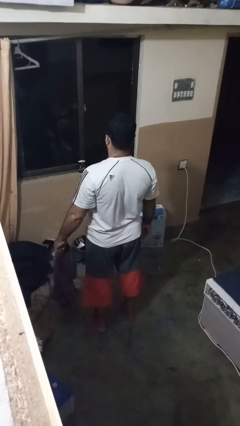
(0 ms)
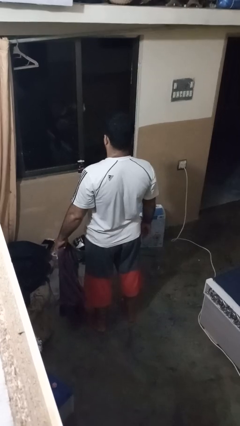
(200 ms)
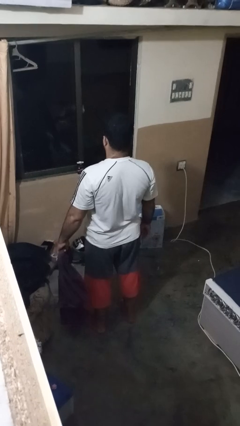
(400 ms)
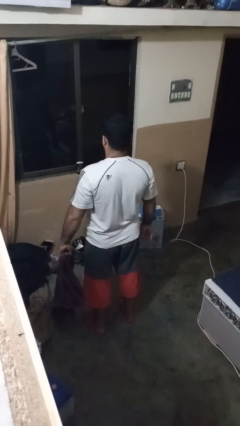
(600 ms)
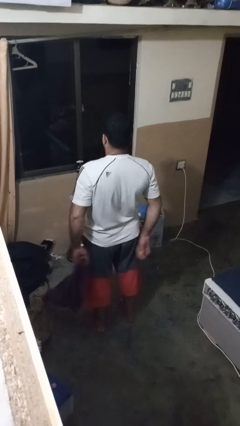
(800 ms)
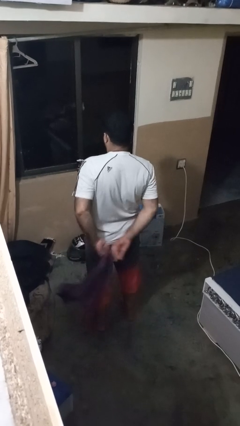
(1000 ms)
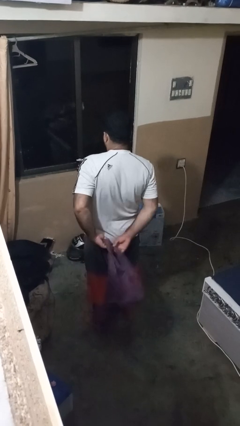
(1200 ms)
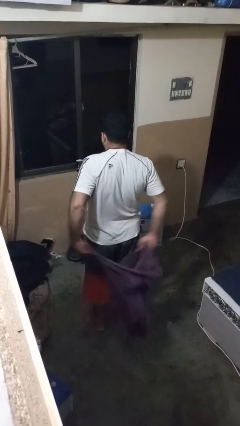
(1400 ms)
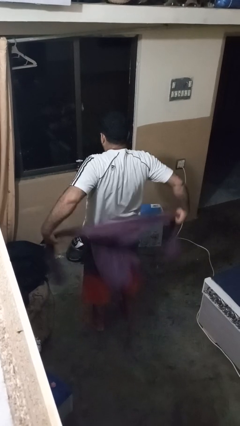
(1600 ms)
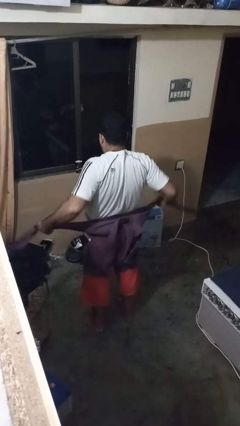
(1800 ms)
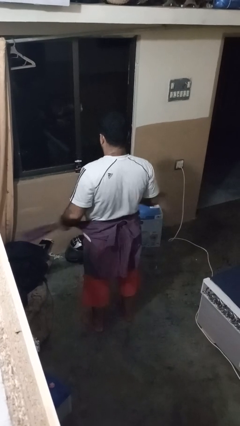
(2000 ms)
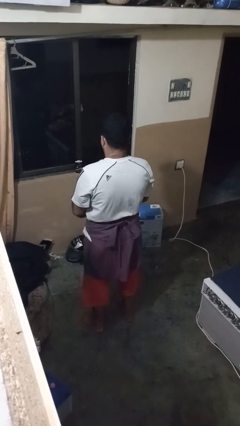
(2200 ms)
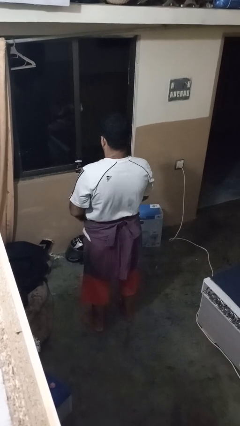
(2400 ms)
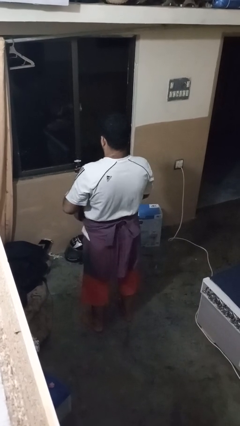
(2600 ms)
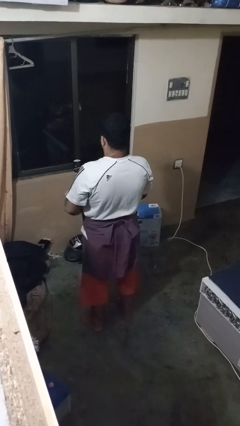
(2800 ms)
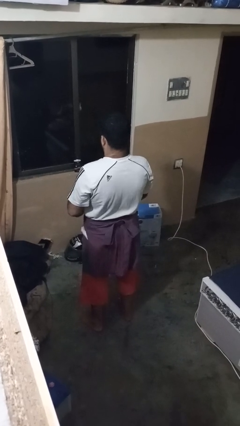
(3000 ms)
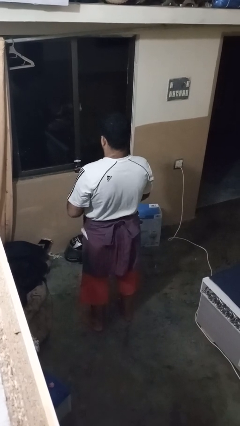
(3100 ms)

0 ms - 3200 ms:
person ties jacket around waist

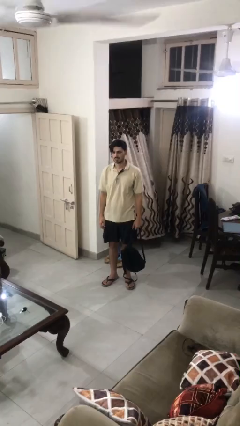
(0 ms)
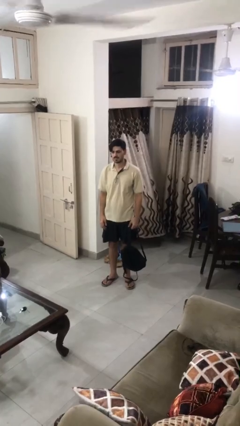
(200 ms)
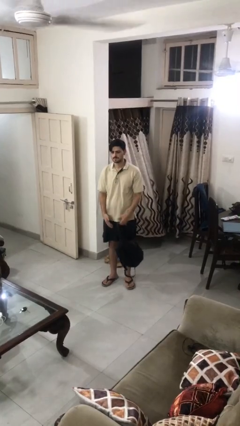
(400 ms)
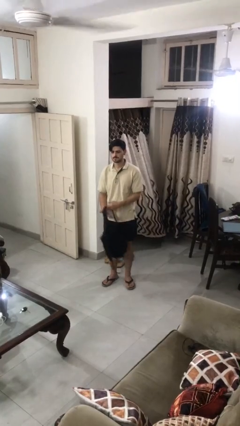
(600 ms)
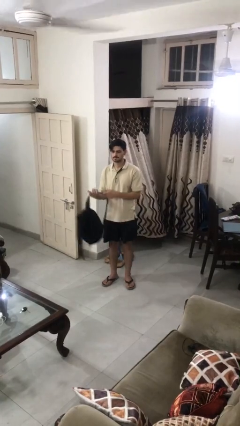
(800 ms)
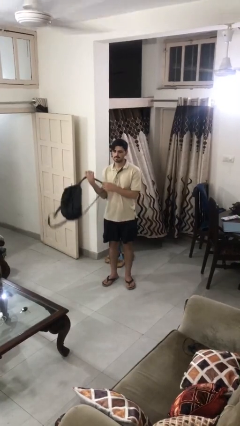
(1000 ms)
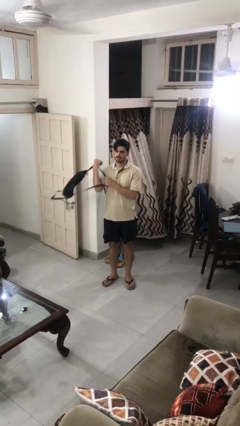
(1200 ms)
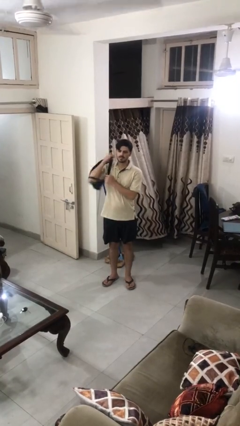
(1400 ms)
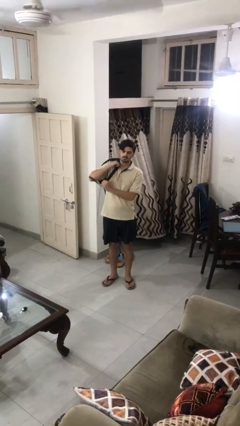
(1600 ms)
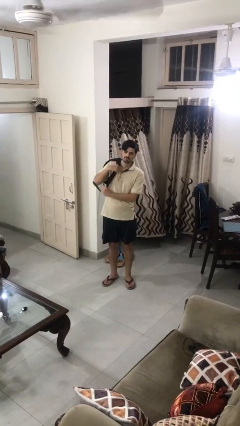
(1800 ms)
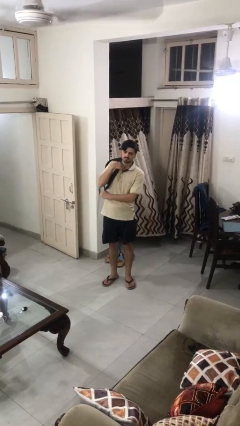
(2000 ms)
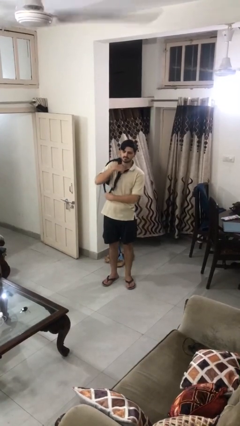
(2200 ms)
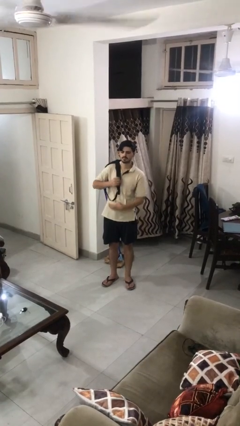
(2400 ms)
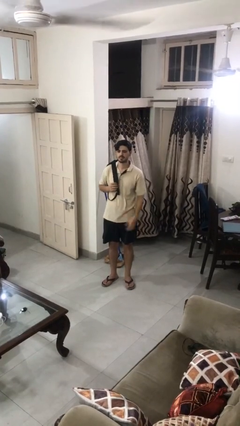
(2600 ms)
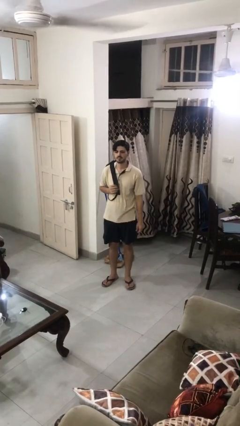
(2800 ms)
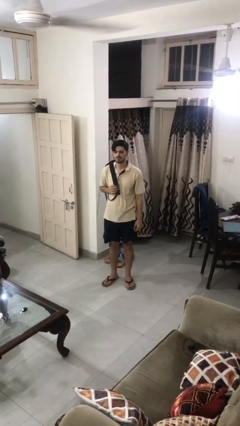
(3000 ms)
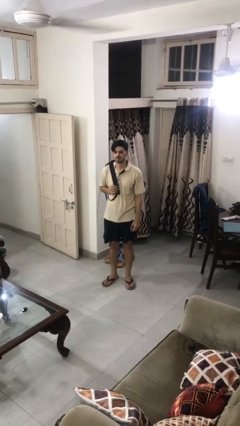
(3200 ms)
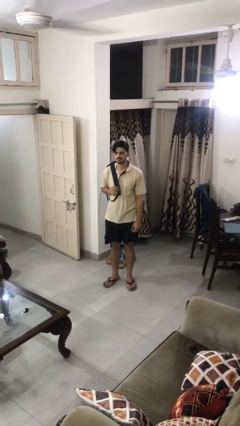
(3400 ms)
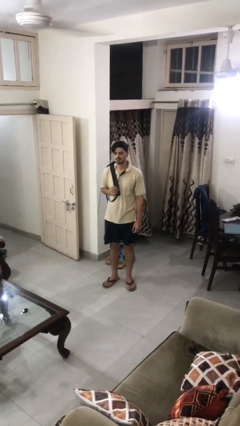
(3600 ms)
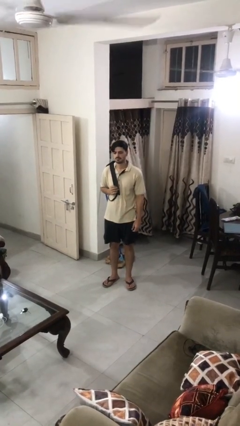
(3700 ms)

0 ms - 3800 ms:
person puts on backpack

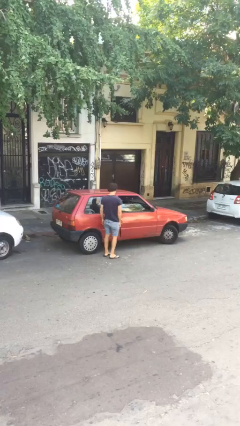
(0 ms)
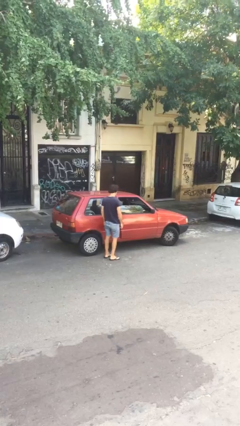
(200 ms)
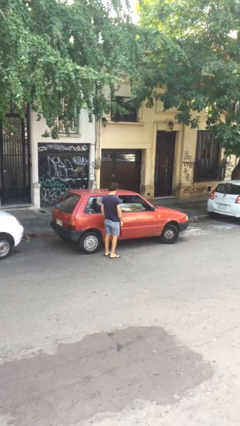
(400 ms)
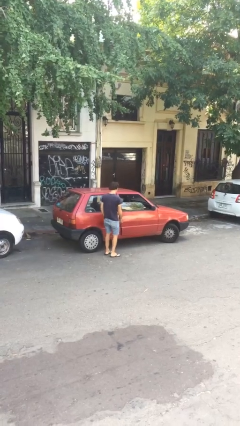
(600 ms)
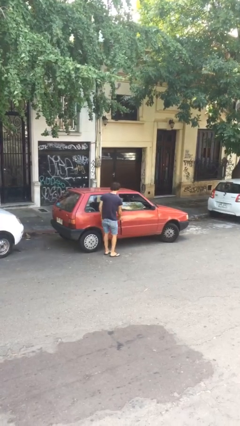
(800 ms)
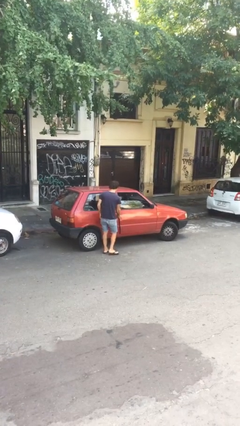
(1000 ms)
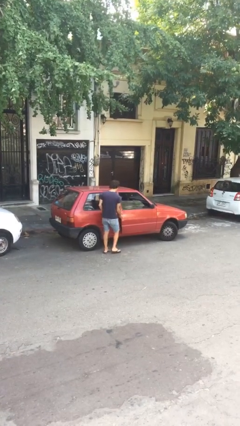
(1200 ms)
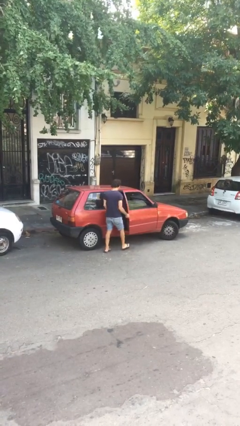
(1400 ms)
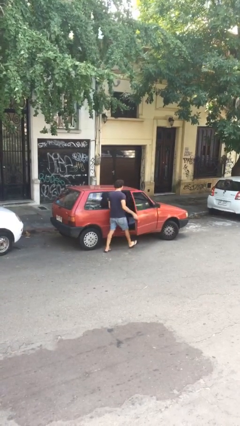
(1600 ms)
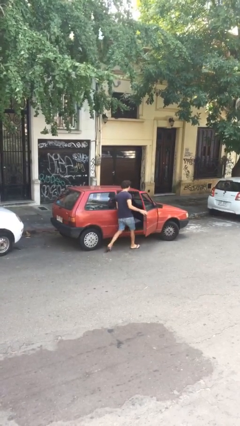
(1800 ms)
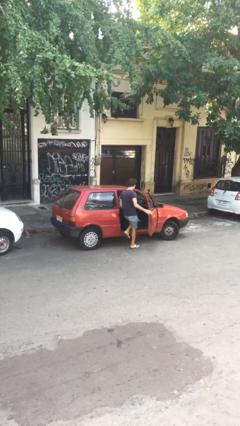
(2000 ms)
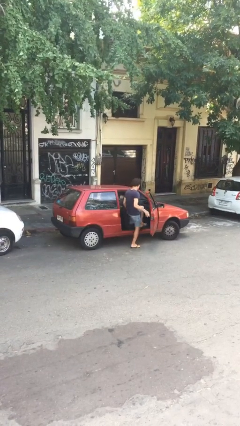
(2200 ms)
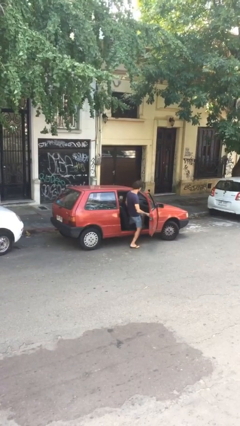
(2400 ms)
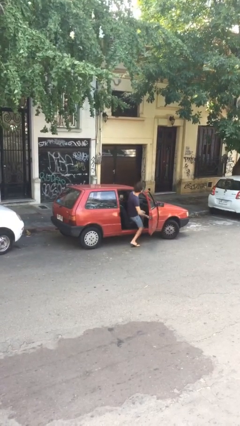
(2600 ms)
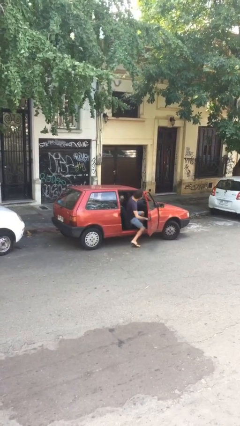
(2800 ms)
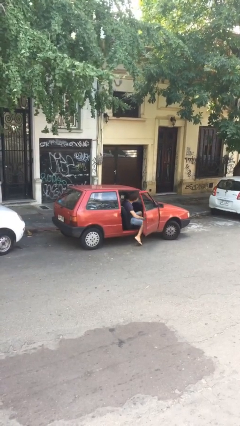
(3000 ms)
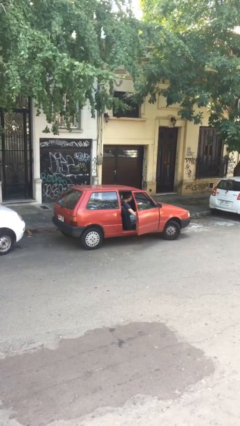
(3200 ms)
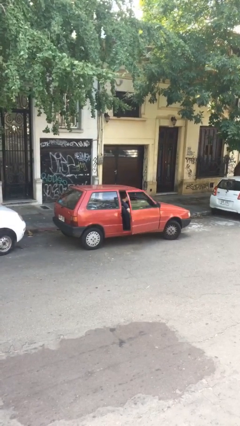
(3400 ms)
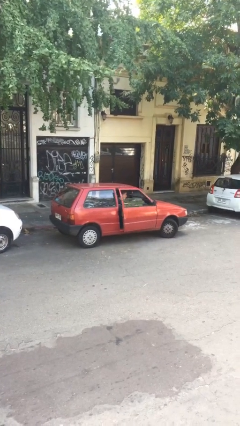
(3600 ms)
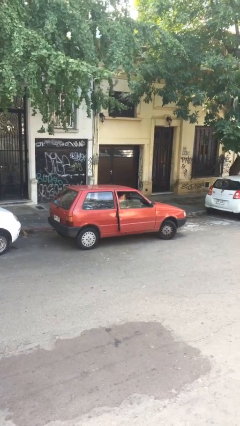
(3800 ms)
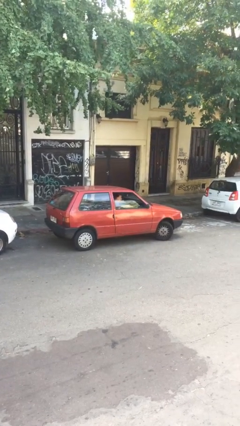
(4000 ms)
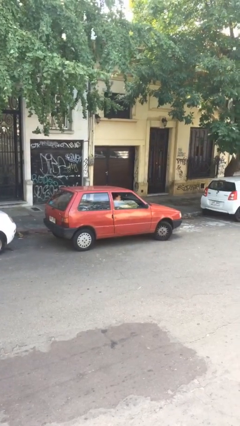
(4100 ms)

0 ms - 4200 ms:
car picks up person

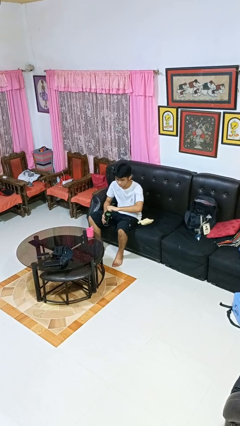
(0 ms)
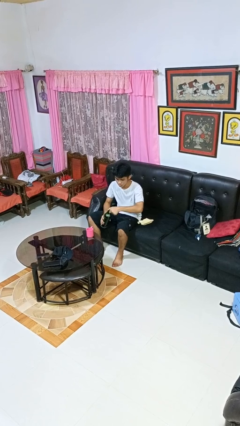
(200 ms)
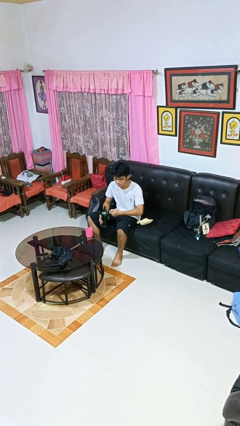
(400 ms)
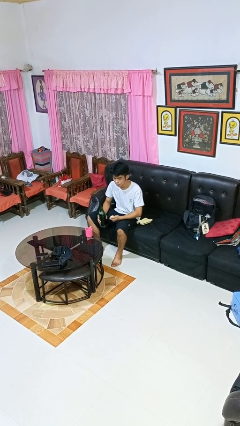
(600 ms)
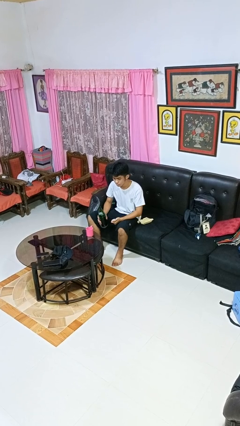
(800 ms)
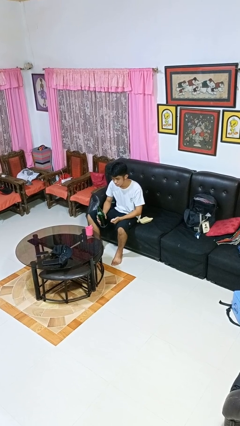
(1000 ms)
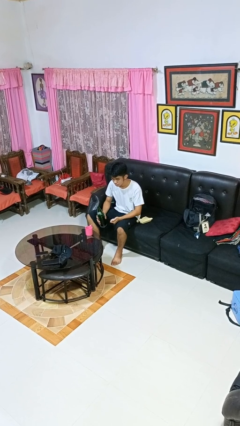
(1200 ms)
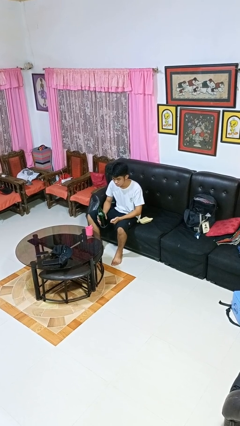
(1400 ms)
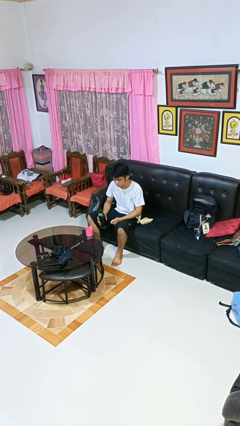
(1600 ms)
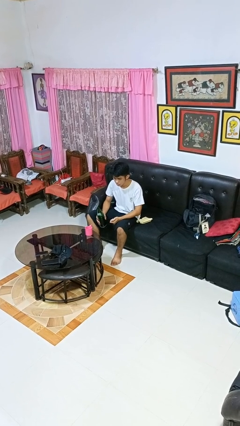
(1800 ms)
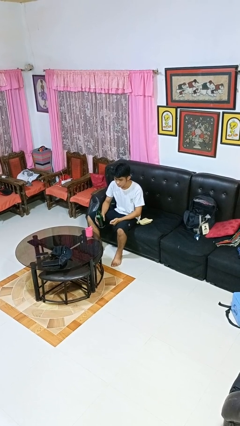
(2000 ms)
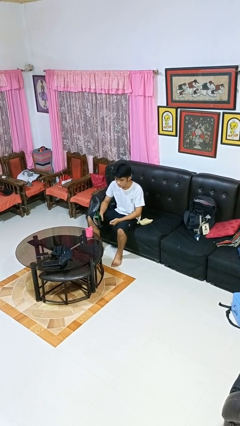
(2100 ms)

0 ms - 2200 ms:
person unscrews lid from bottle

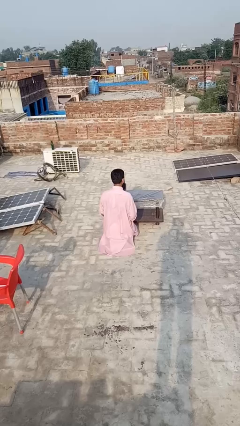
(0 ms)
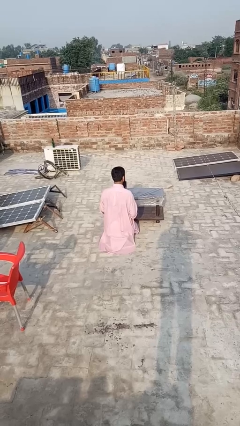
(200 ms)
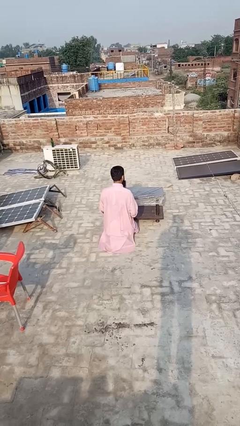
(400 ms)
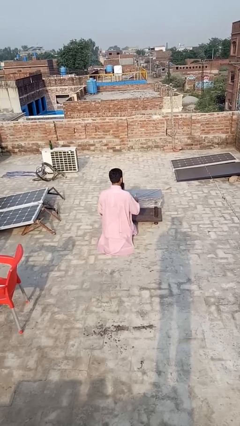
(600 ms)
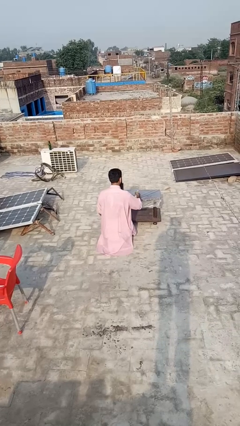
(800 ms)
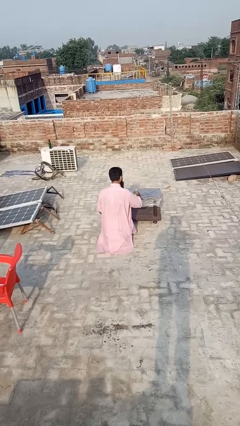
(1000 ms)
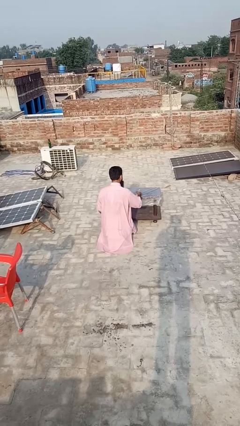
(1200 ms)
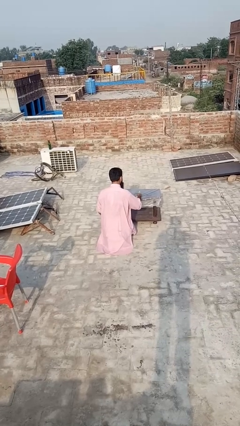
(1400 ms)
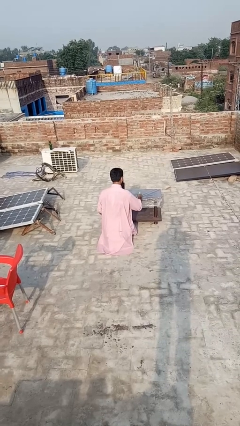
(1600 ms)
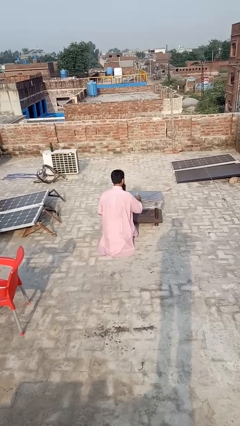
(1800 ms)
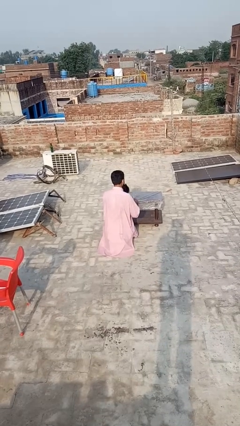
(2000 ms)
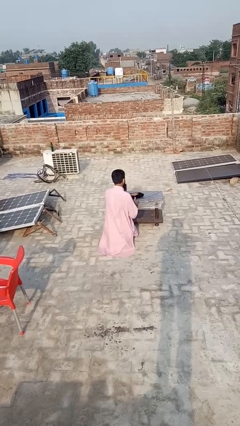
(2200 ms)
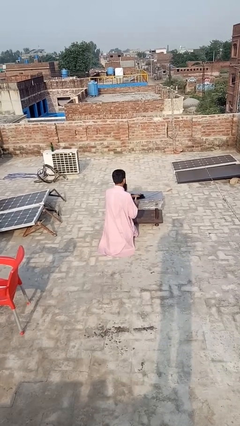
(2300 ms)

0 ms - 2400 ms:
person sprays from bottle

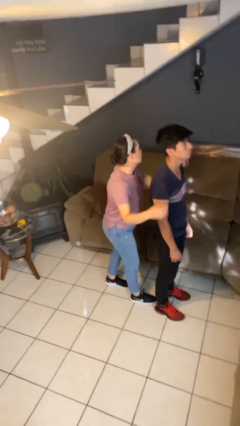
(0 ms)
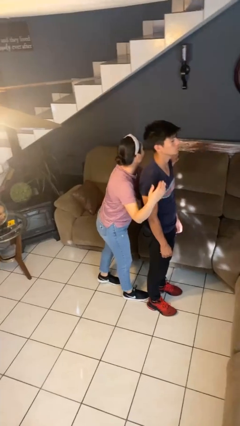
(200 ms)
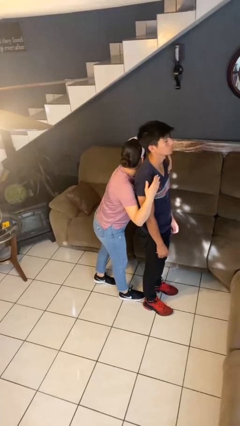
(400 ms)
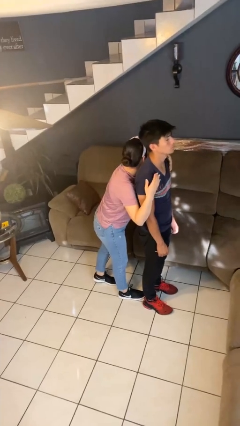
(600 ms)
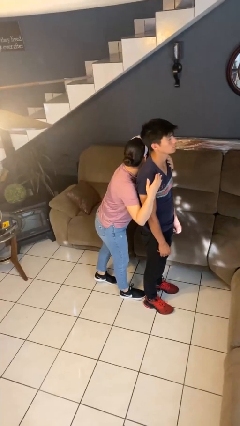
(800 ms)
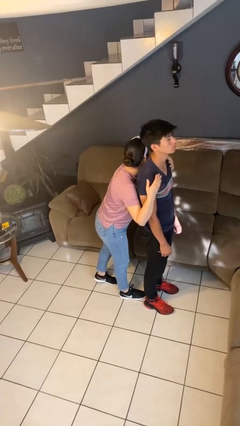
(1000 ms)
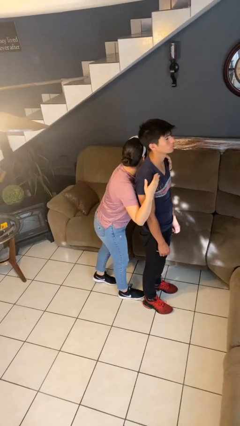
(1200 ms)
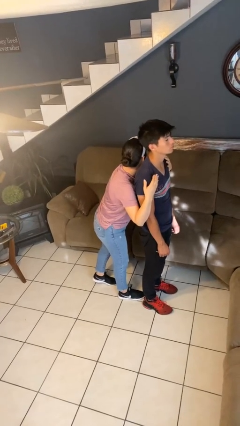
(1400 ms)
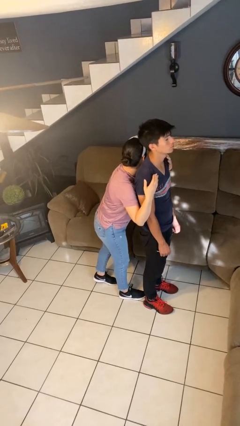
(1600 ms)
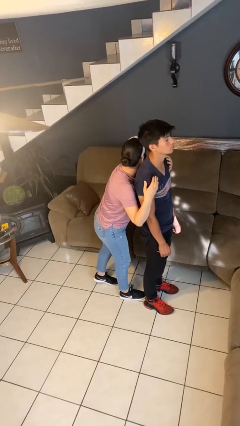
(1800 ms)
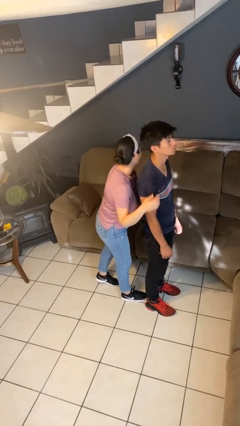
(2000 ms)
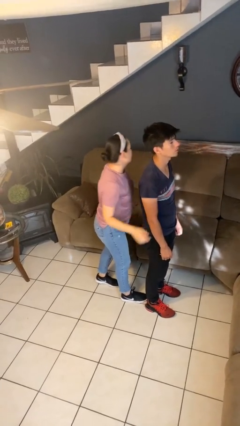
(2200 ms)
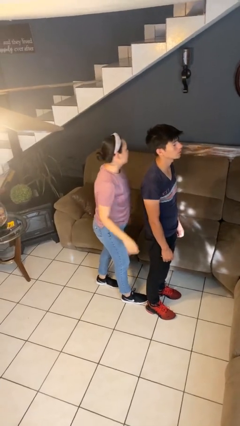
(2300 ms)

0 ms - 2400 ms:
person hugs person from behind
